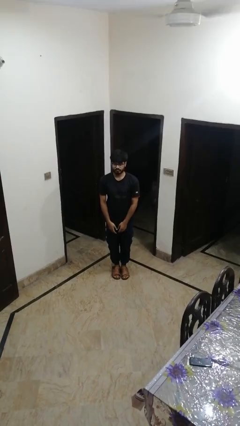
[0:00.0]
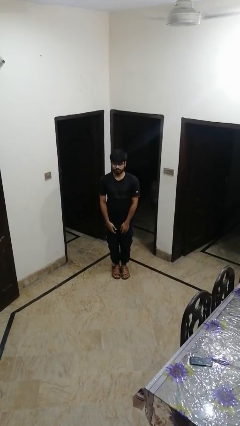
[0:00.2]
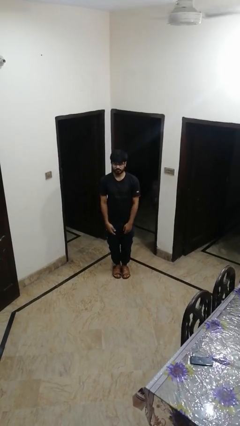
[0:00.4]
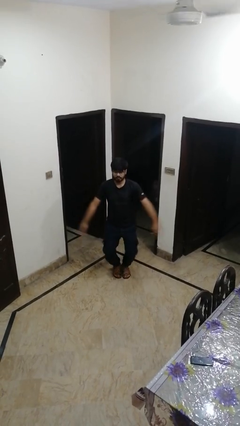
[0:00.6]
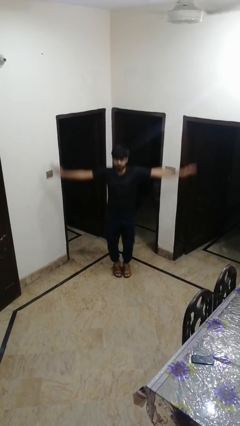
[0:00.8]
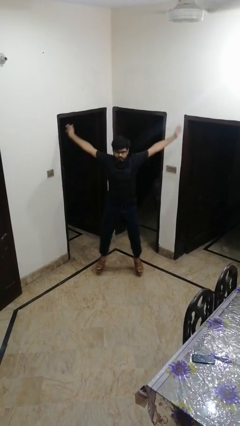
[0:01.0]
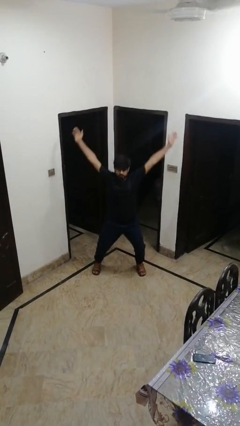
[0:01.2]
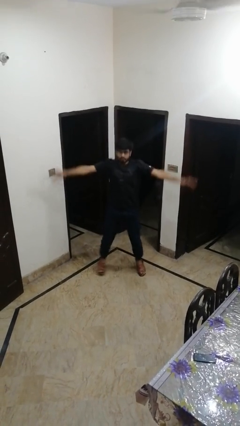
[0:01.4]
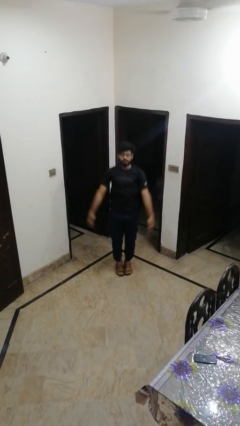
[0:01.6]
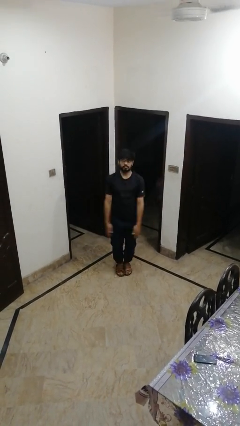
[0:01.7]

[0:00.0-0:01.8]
person exercises with jumping jacks

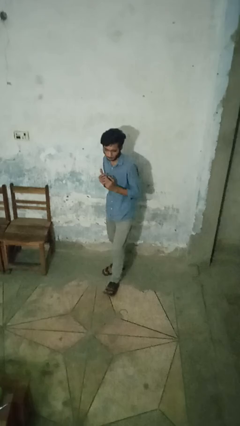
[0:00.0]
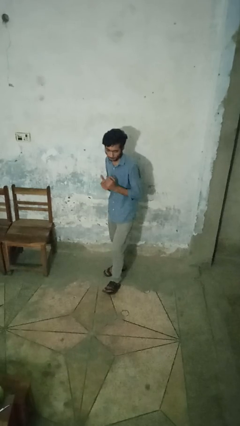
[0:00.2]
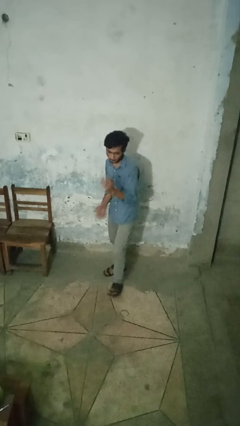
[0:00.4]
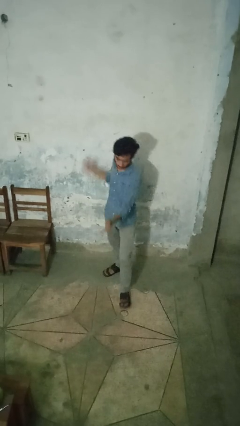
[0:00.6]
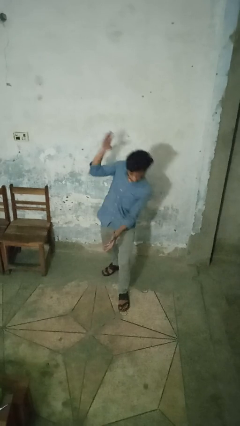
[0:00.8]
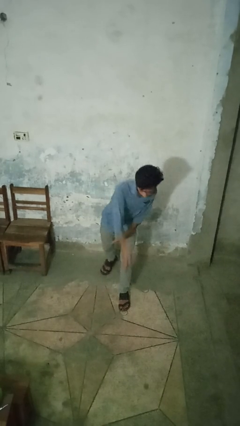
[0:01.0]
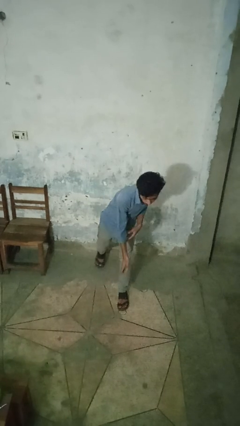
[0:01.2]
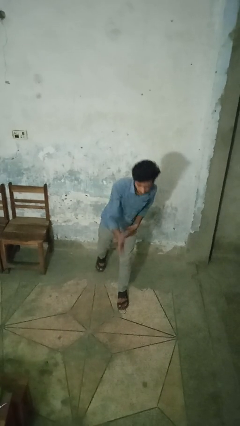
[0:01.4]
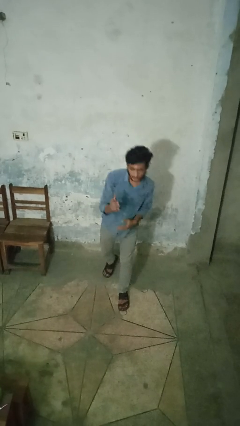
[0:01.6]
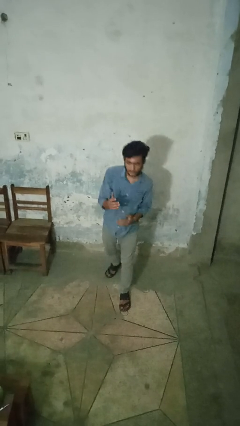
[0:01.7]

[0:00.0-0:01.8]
person karate chop

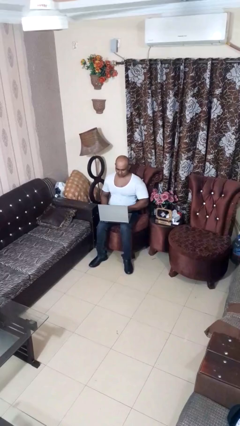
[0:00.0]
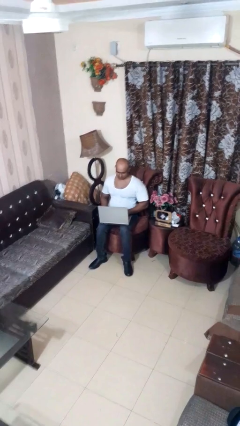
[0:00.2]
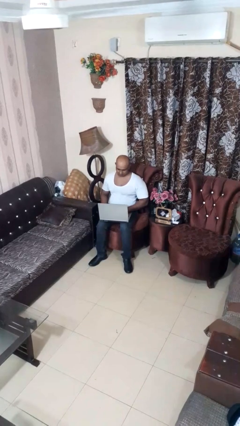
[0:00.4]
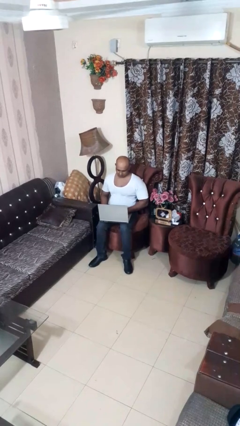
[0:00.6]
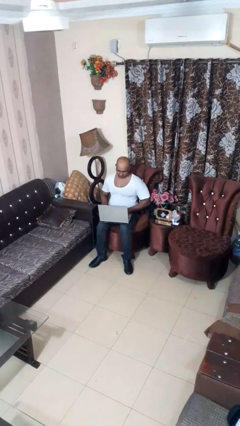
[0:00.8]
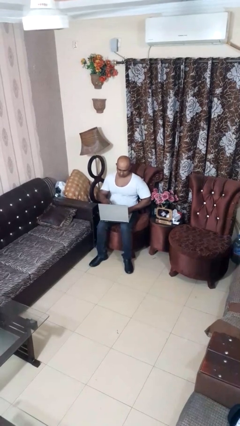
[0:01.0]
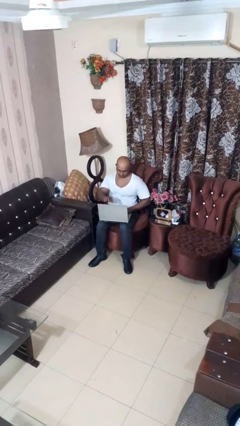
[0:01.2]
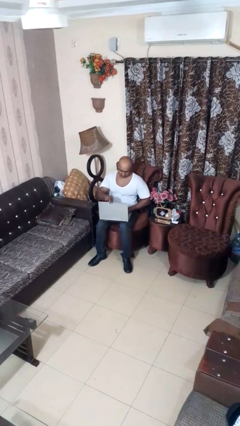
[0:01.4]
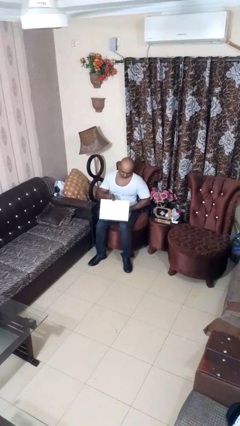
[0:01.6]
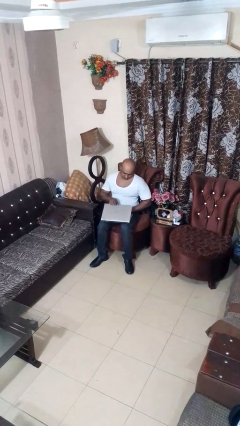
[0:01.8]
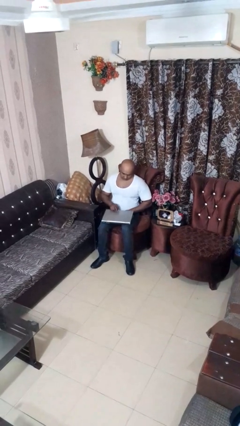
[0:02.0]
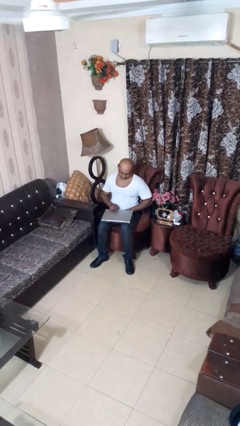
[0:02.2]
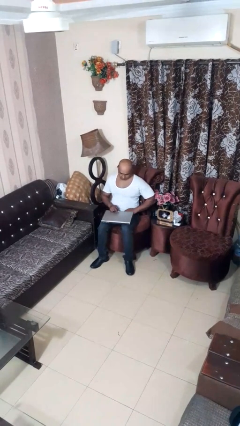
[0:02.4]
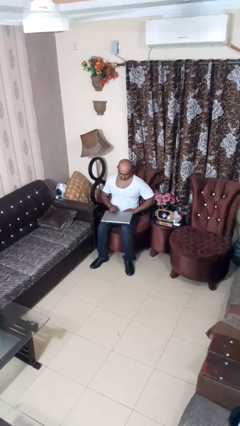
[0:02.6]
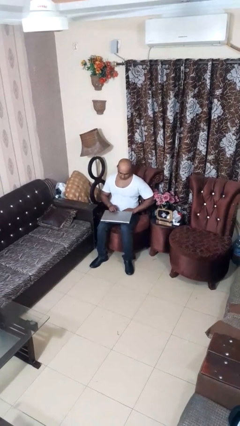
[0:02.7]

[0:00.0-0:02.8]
person closes laptop

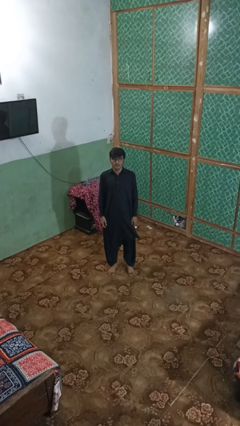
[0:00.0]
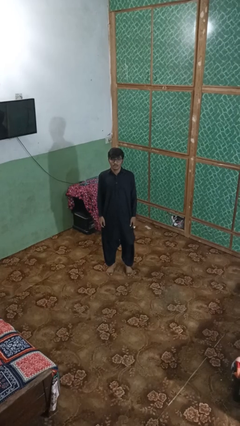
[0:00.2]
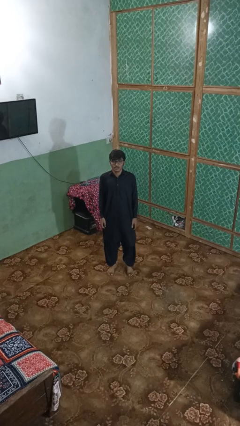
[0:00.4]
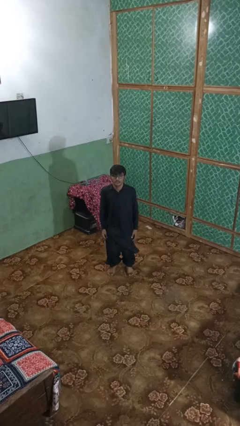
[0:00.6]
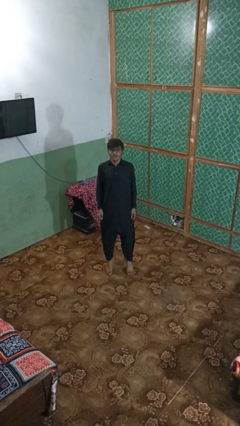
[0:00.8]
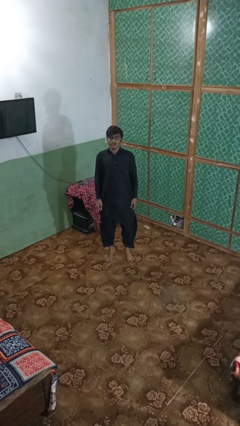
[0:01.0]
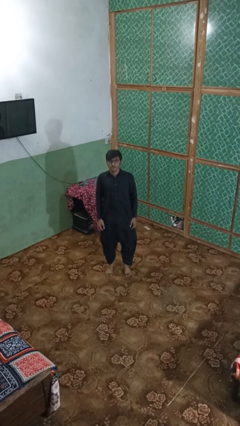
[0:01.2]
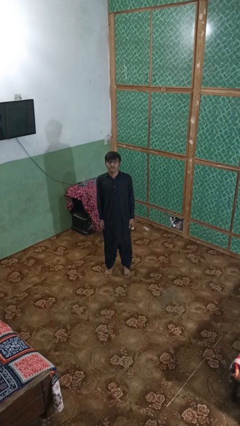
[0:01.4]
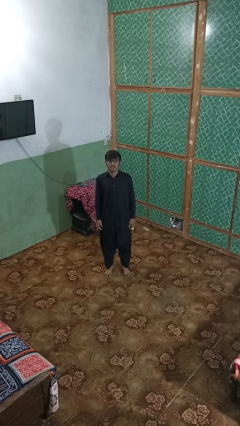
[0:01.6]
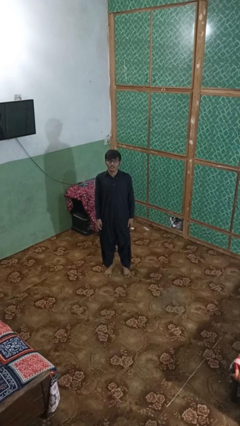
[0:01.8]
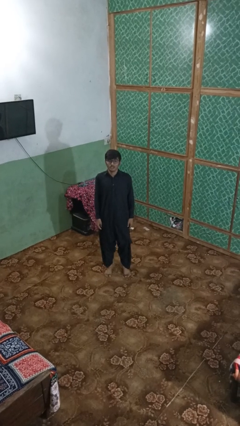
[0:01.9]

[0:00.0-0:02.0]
person jumps

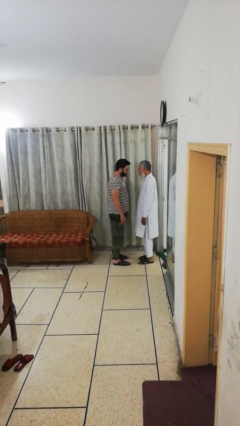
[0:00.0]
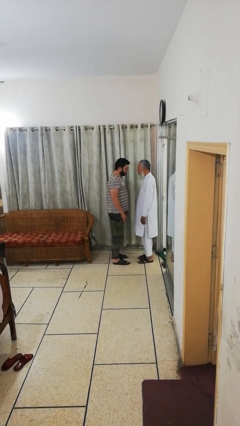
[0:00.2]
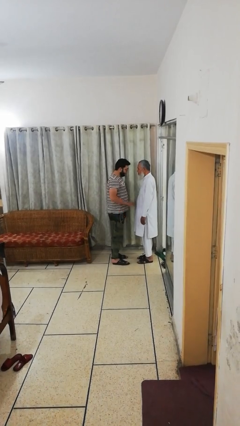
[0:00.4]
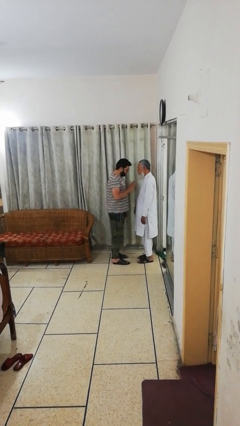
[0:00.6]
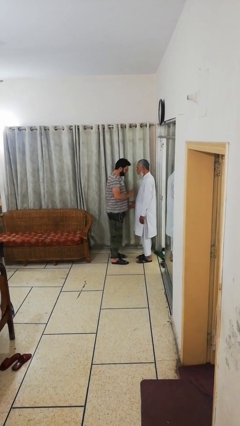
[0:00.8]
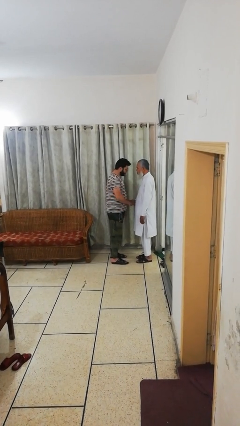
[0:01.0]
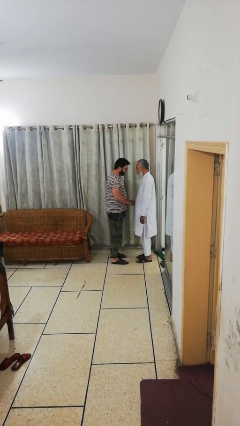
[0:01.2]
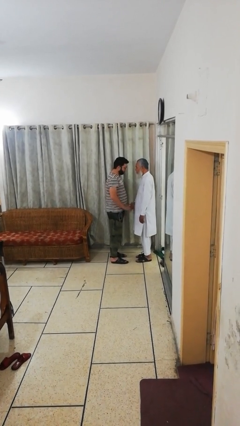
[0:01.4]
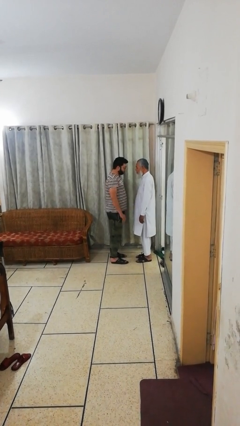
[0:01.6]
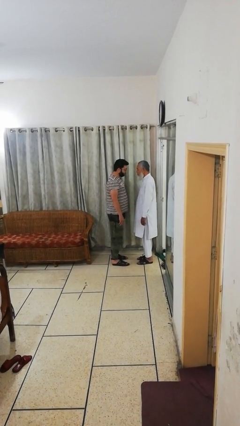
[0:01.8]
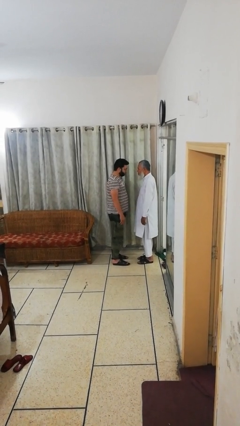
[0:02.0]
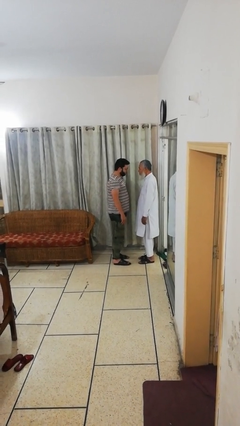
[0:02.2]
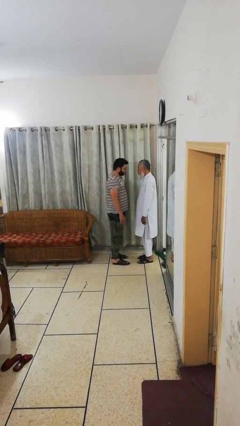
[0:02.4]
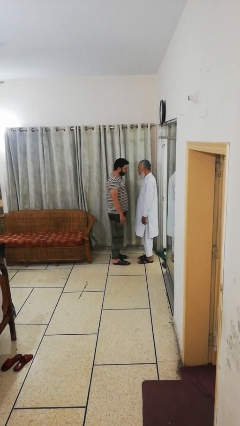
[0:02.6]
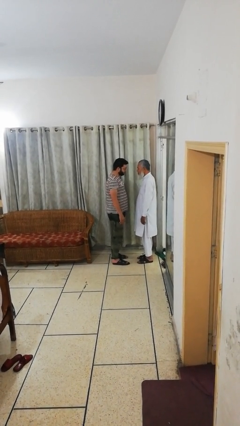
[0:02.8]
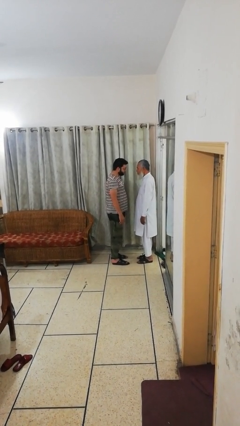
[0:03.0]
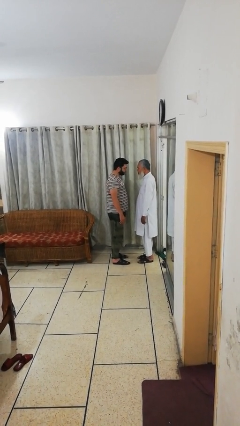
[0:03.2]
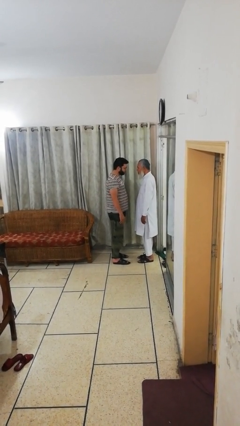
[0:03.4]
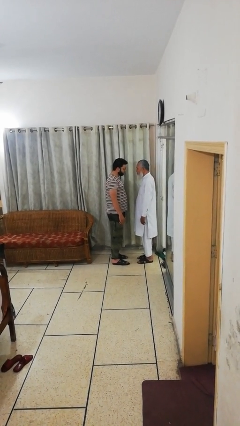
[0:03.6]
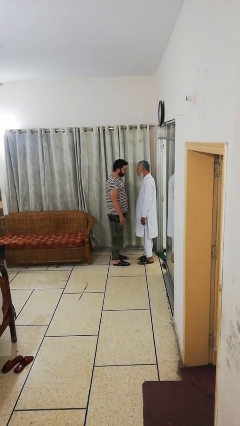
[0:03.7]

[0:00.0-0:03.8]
person highfives hand

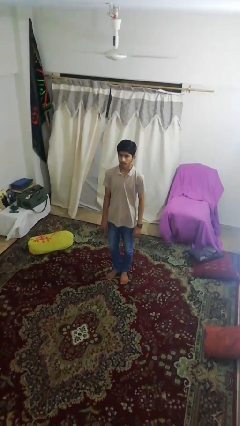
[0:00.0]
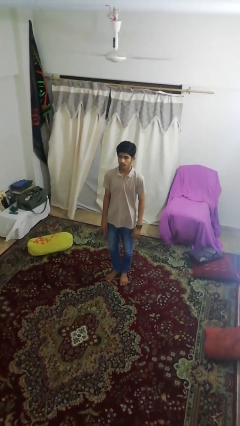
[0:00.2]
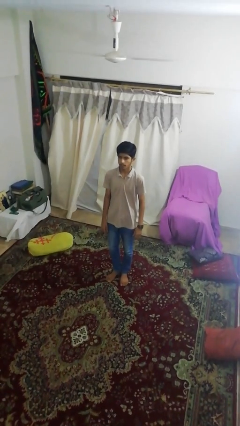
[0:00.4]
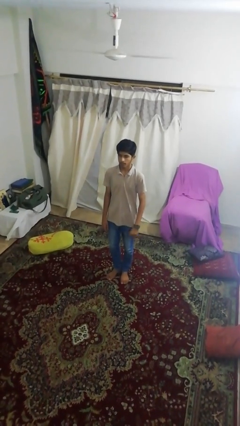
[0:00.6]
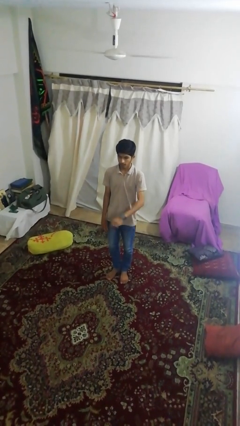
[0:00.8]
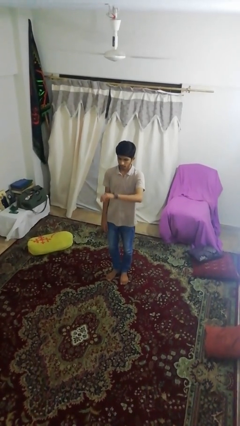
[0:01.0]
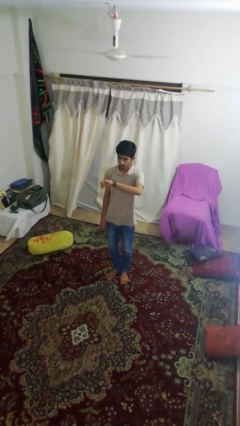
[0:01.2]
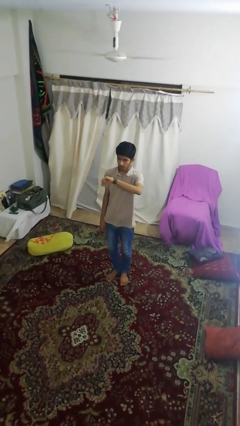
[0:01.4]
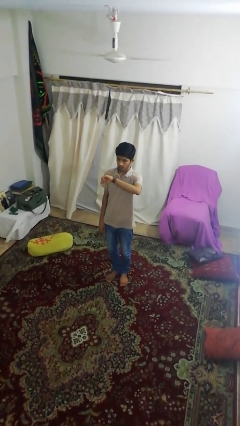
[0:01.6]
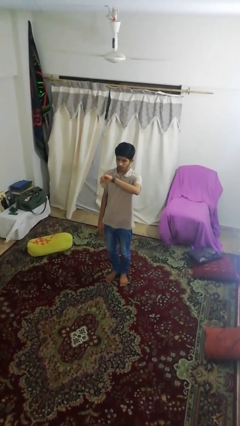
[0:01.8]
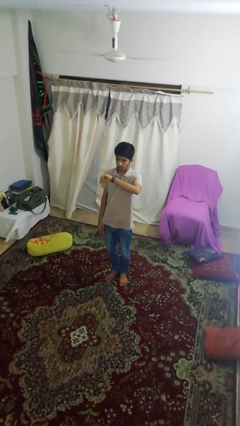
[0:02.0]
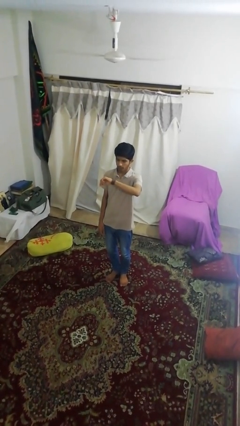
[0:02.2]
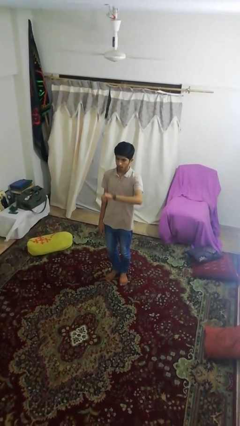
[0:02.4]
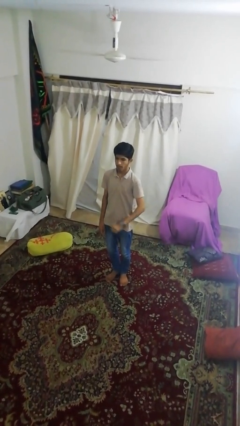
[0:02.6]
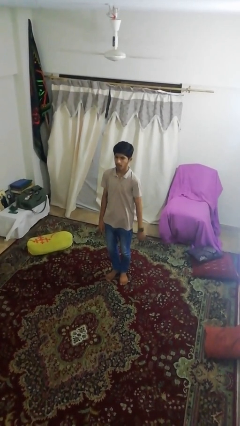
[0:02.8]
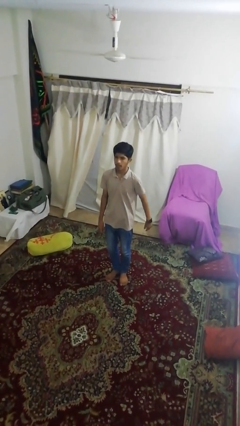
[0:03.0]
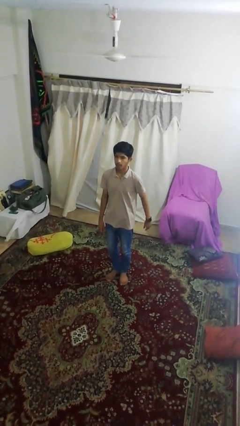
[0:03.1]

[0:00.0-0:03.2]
person looks at wristwatch

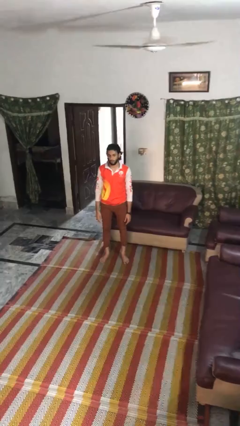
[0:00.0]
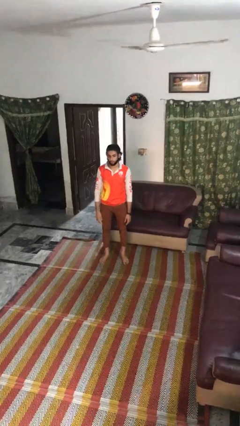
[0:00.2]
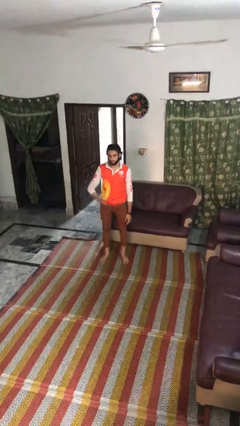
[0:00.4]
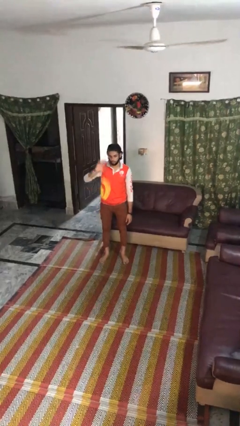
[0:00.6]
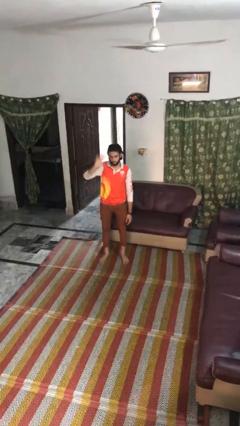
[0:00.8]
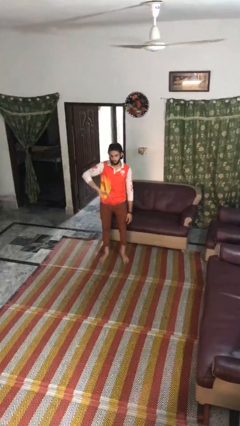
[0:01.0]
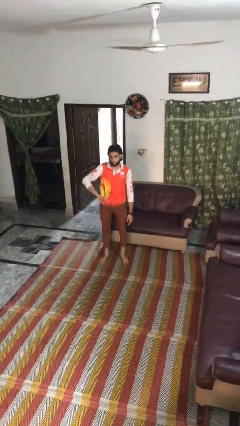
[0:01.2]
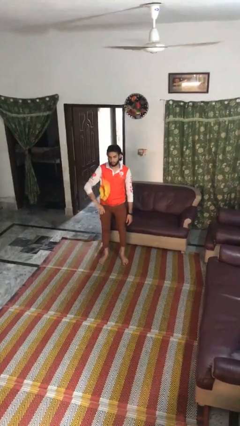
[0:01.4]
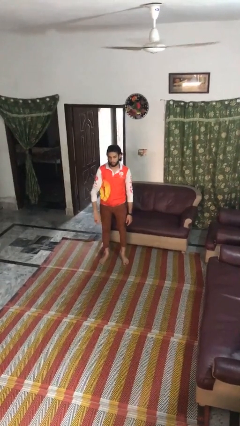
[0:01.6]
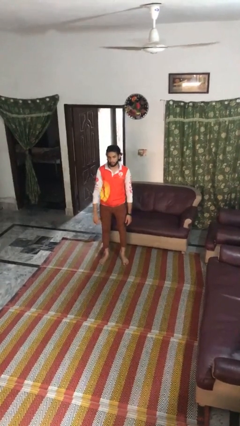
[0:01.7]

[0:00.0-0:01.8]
person gestures swipe down
